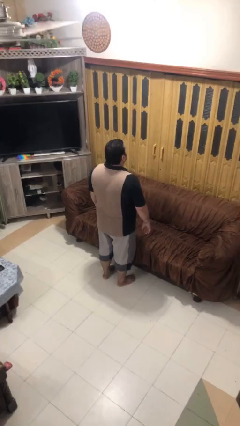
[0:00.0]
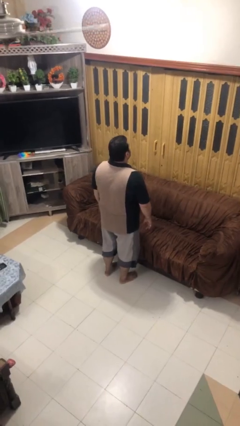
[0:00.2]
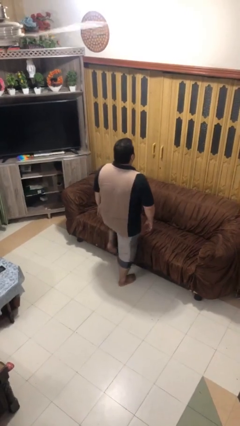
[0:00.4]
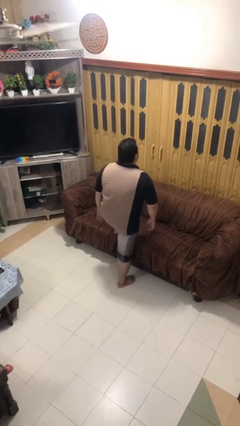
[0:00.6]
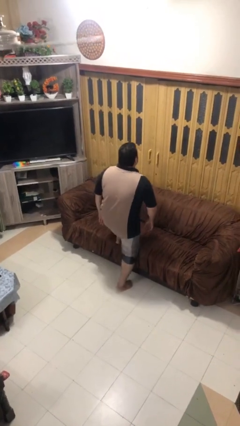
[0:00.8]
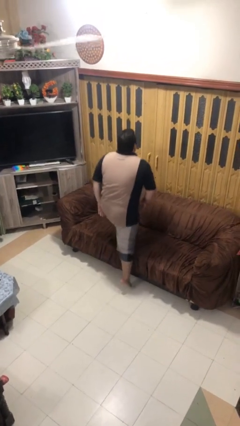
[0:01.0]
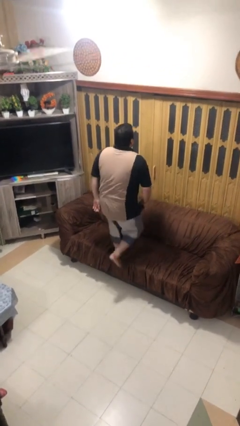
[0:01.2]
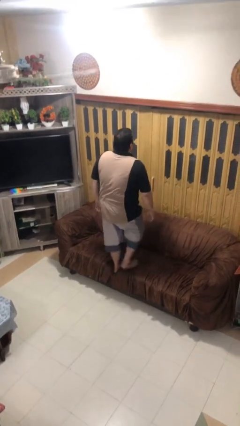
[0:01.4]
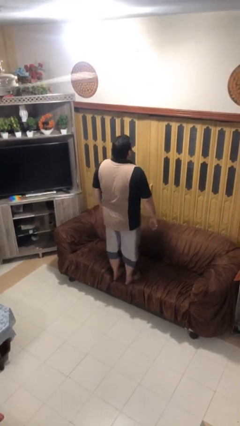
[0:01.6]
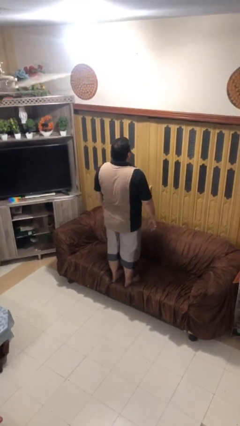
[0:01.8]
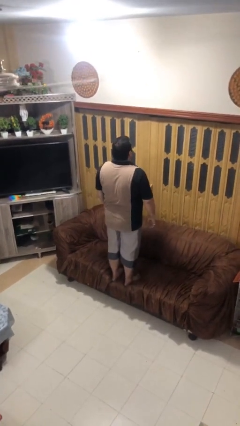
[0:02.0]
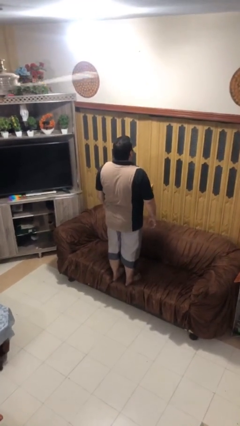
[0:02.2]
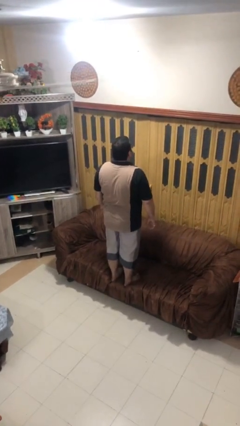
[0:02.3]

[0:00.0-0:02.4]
person climbs on couch

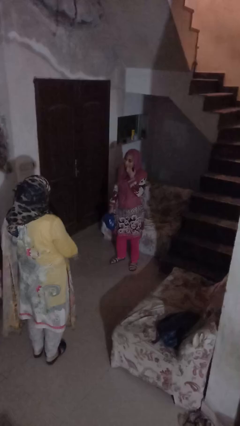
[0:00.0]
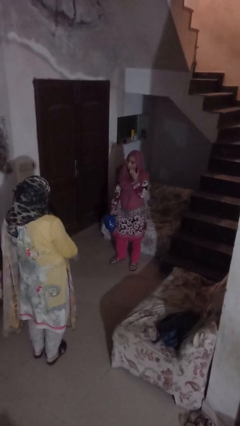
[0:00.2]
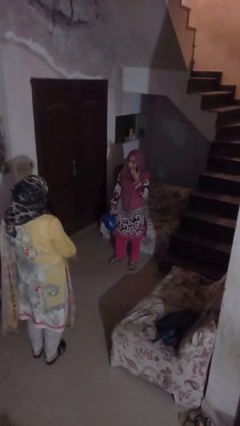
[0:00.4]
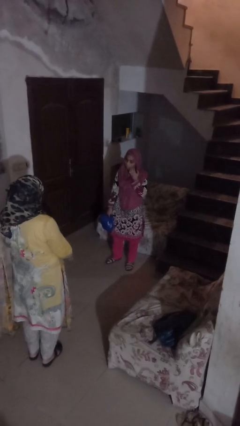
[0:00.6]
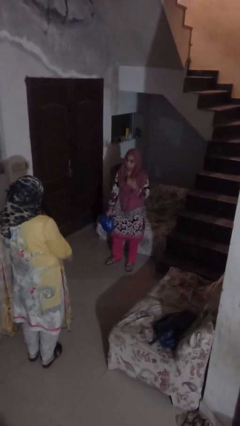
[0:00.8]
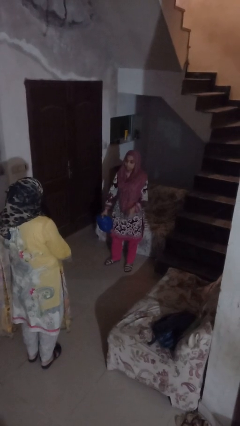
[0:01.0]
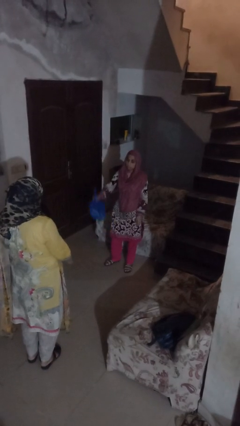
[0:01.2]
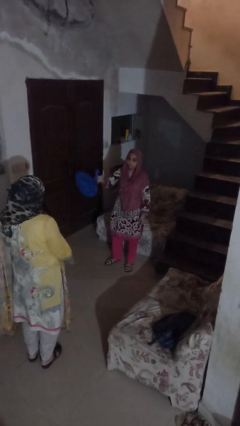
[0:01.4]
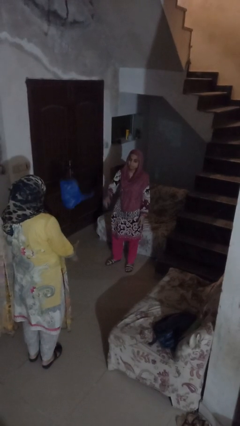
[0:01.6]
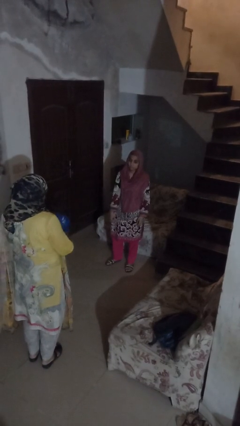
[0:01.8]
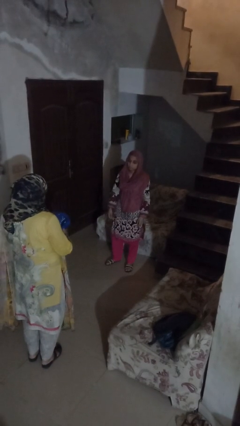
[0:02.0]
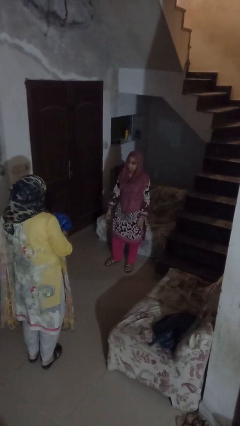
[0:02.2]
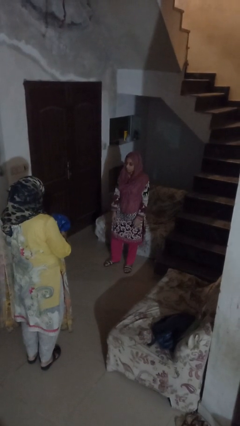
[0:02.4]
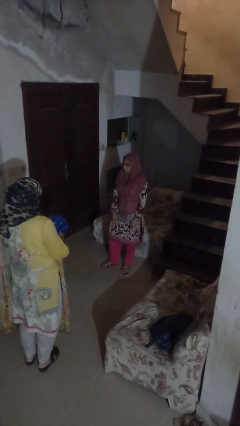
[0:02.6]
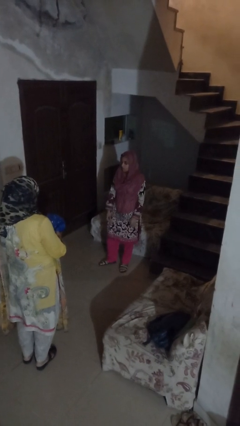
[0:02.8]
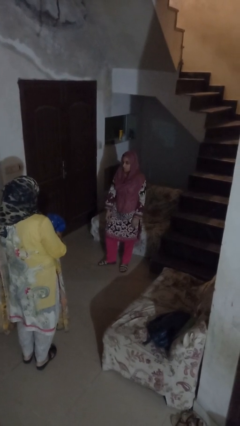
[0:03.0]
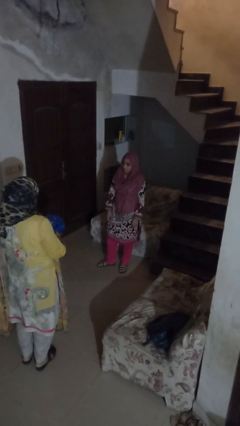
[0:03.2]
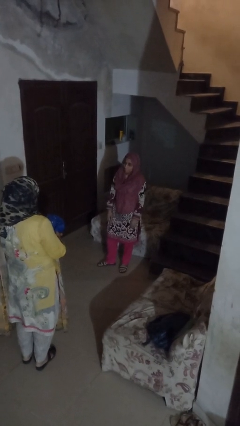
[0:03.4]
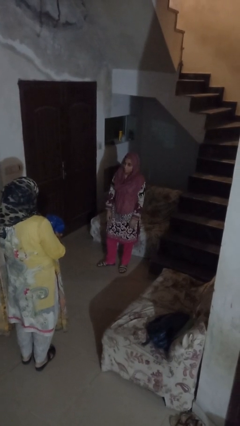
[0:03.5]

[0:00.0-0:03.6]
person throws object to person

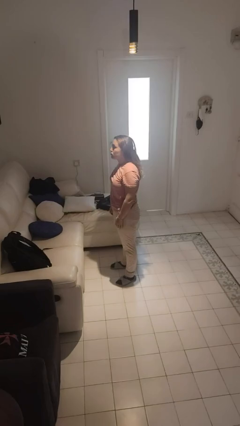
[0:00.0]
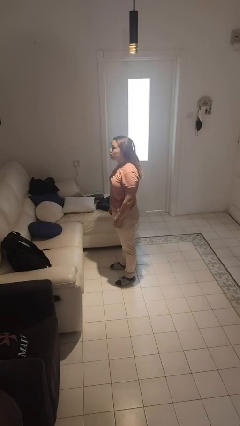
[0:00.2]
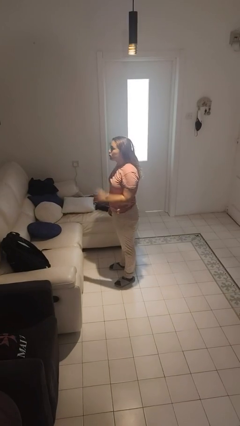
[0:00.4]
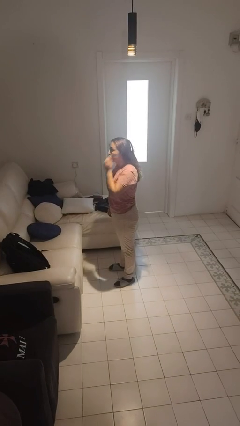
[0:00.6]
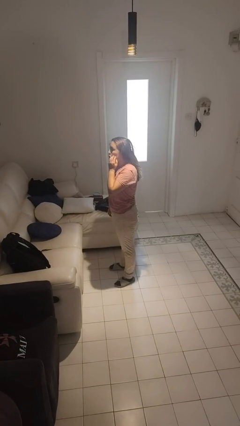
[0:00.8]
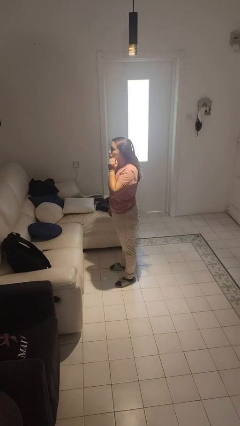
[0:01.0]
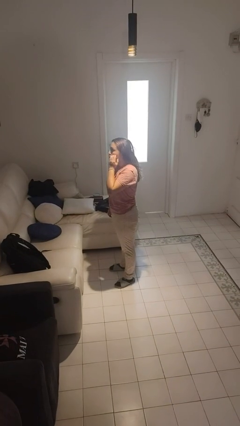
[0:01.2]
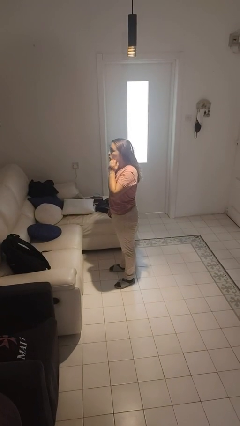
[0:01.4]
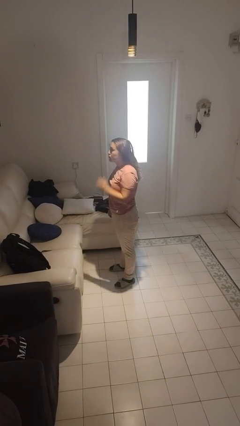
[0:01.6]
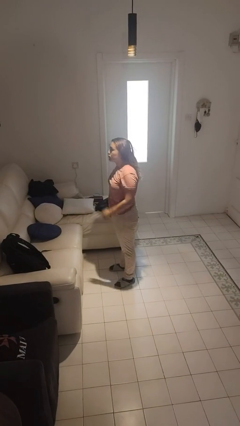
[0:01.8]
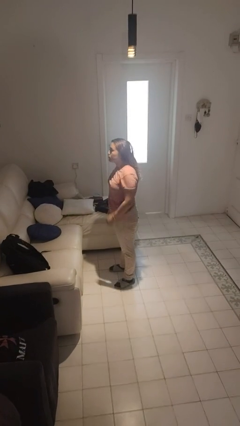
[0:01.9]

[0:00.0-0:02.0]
person scratches face

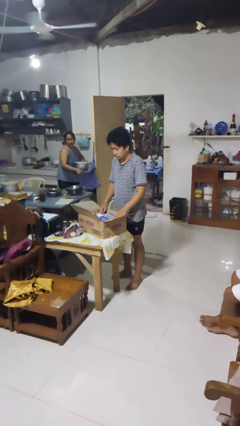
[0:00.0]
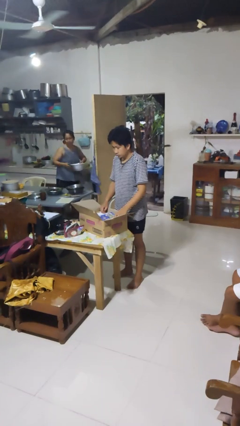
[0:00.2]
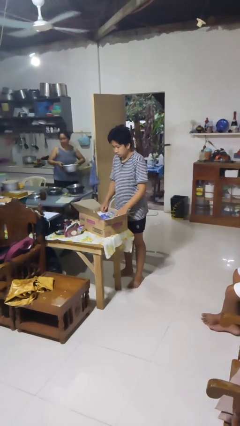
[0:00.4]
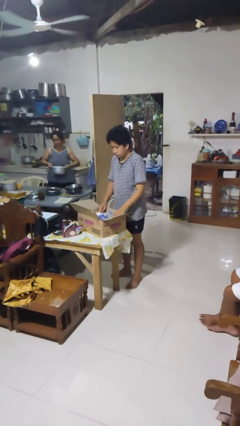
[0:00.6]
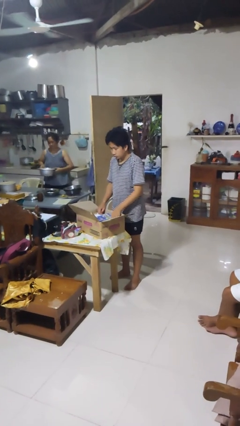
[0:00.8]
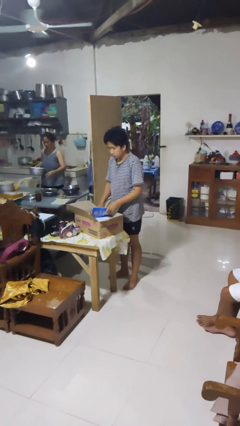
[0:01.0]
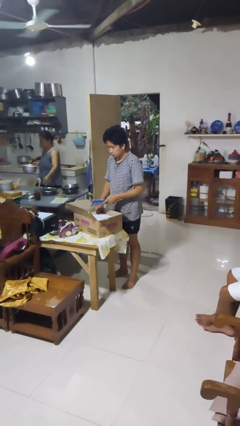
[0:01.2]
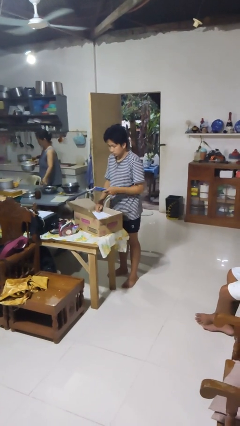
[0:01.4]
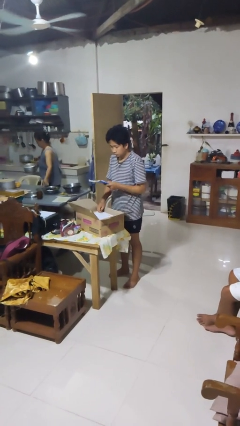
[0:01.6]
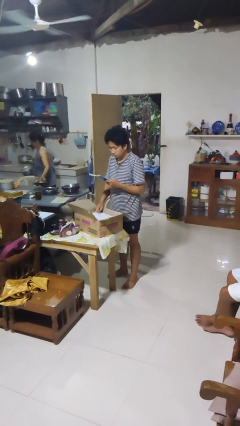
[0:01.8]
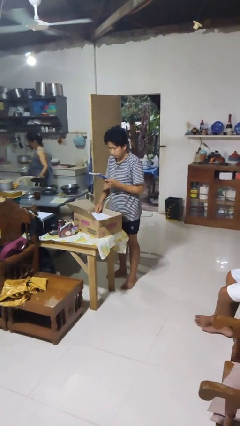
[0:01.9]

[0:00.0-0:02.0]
person takes object from box

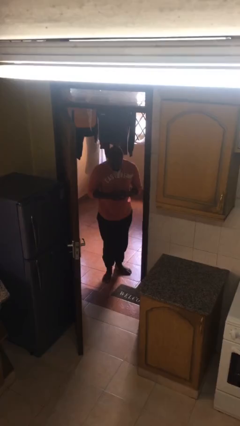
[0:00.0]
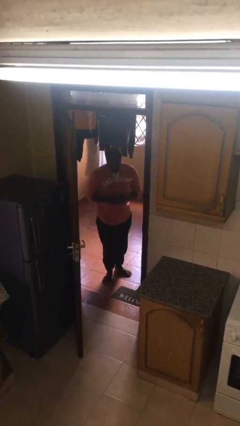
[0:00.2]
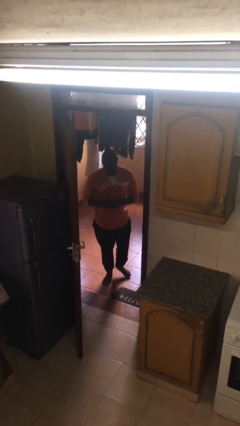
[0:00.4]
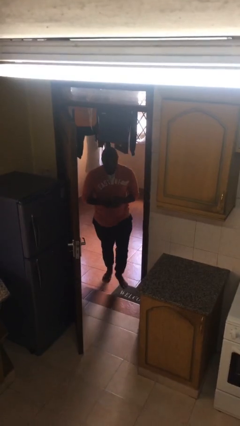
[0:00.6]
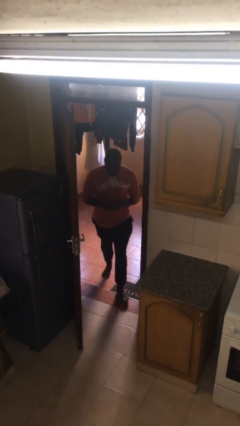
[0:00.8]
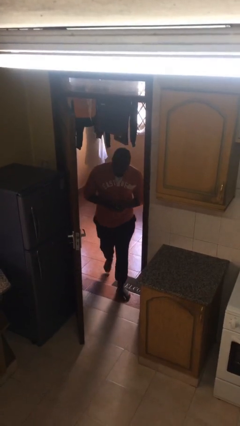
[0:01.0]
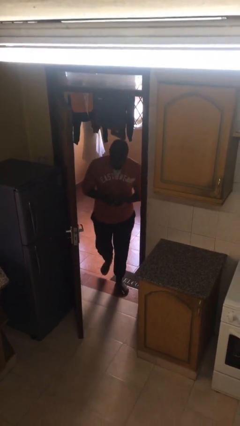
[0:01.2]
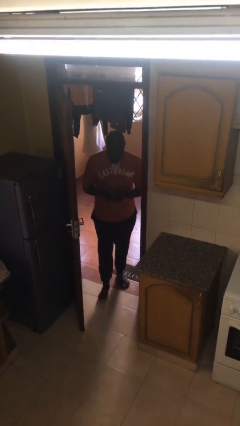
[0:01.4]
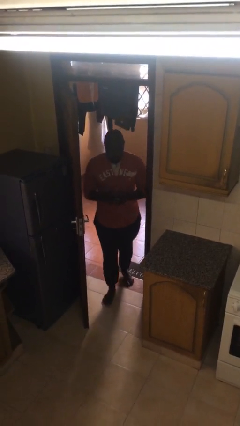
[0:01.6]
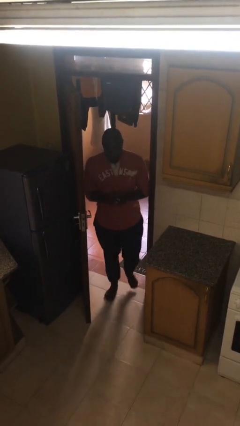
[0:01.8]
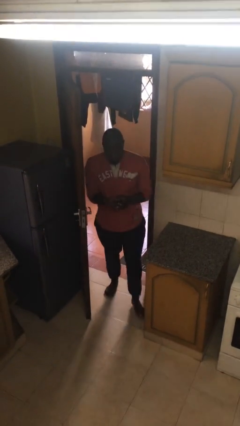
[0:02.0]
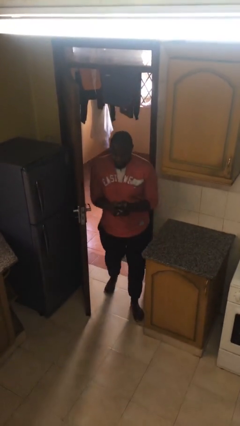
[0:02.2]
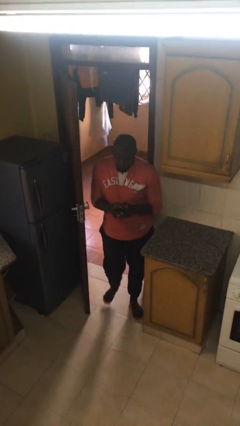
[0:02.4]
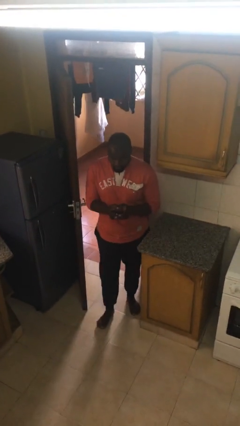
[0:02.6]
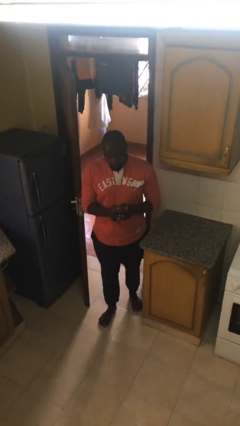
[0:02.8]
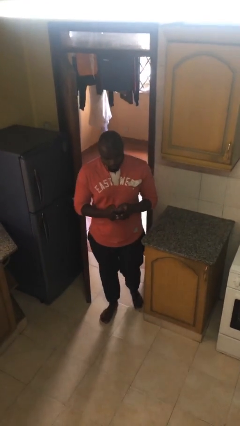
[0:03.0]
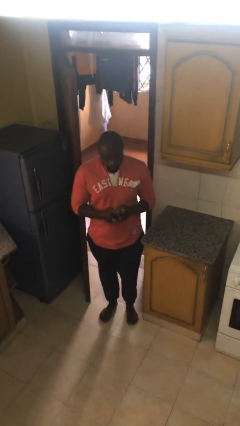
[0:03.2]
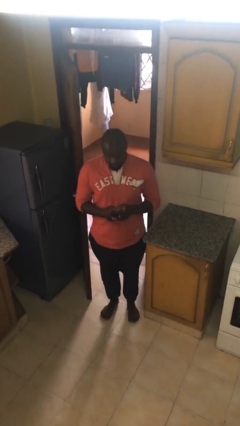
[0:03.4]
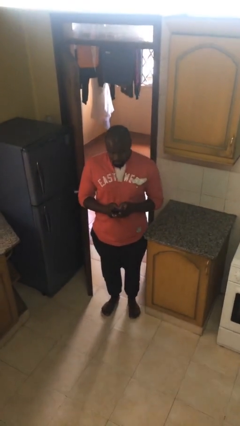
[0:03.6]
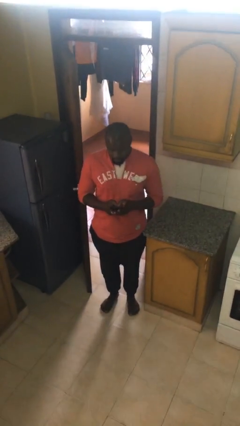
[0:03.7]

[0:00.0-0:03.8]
person enters scene through structure

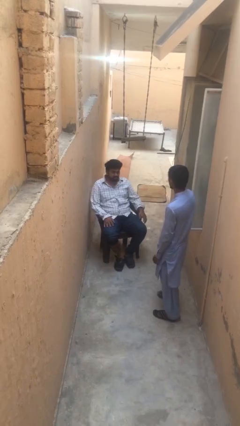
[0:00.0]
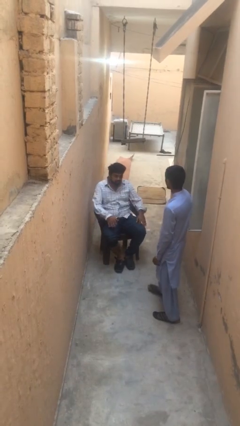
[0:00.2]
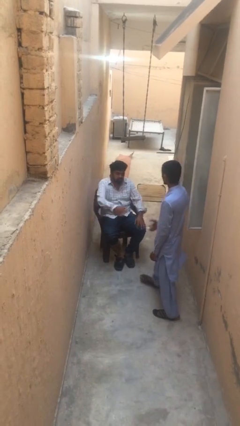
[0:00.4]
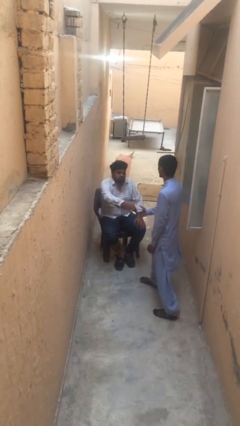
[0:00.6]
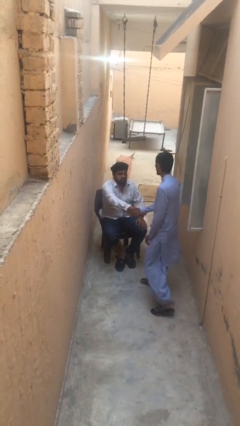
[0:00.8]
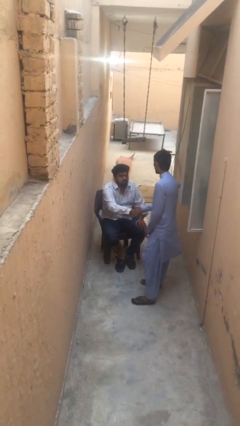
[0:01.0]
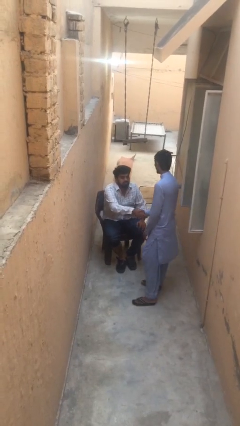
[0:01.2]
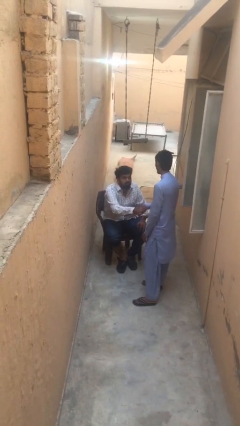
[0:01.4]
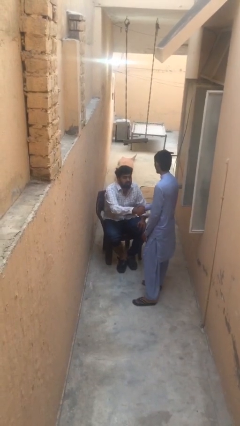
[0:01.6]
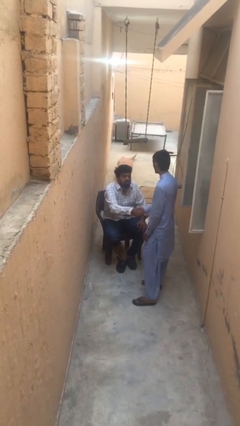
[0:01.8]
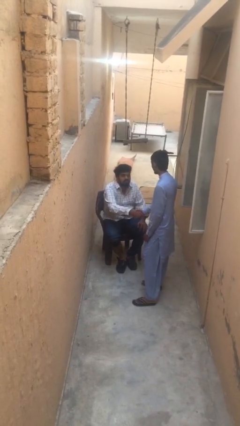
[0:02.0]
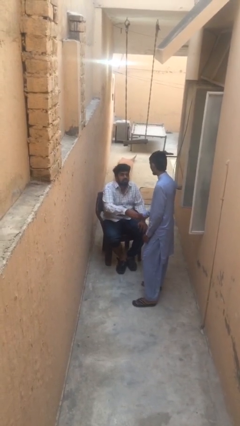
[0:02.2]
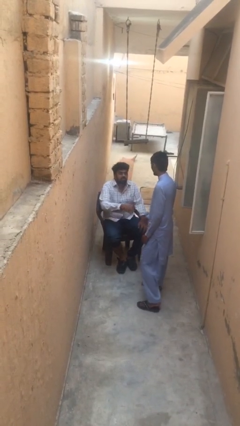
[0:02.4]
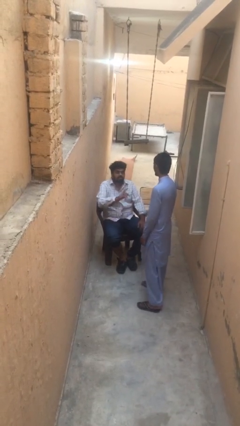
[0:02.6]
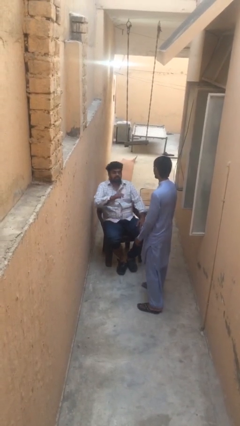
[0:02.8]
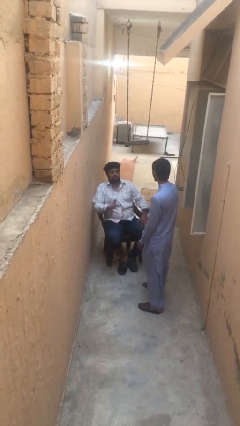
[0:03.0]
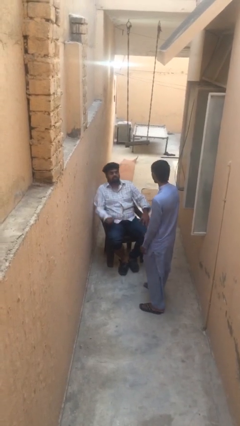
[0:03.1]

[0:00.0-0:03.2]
person shakes hand

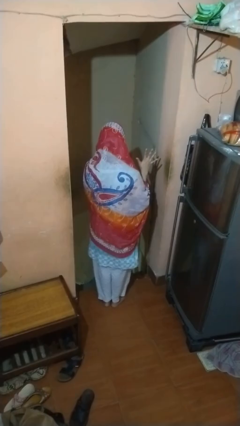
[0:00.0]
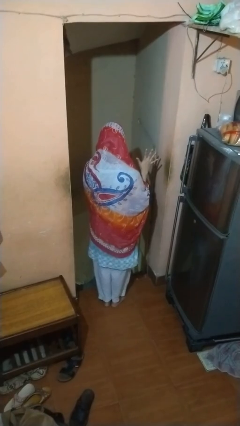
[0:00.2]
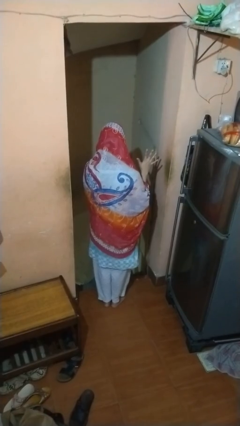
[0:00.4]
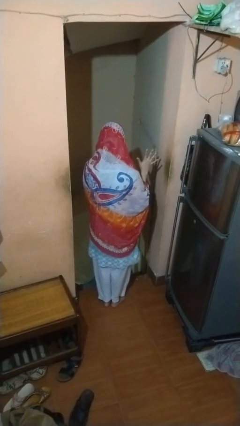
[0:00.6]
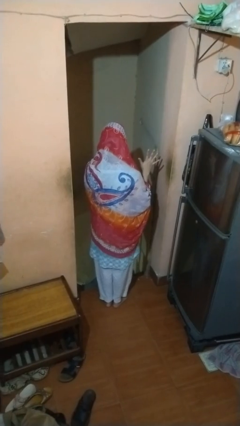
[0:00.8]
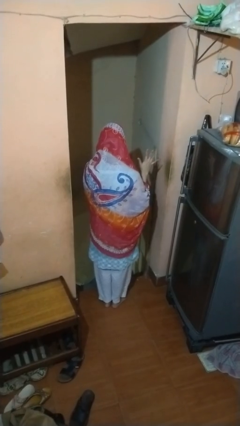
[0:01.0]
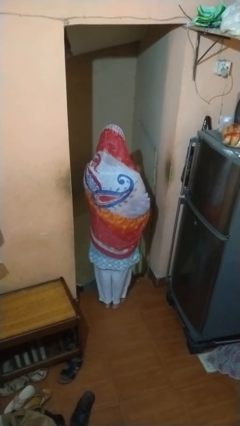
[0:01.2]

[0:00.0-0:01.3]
person gestures number five
